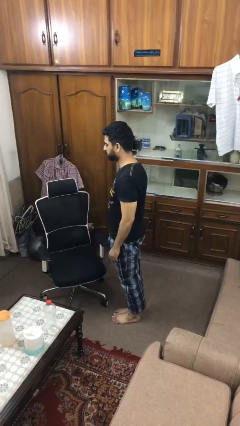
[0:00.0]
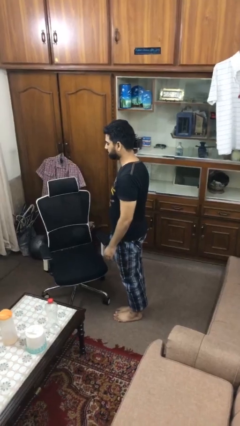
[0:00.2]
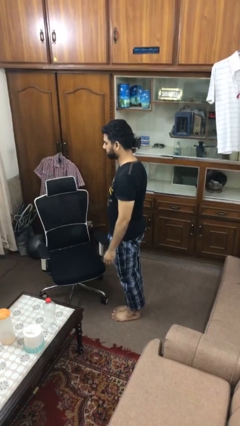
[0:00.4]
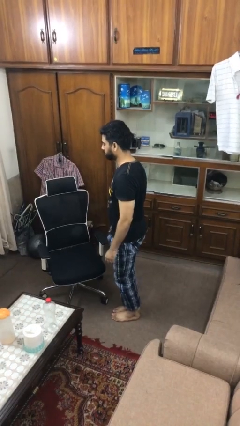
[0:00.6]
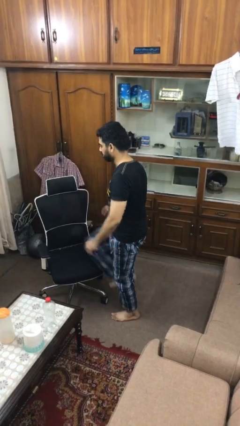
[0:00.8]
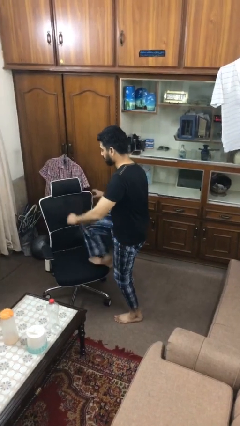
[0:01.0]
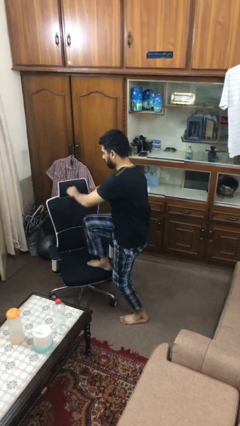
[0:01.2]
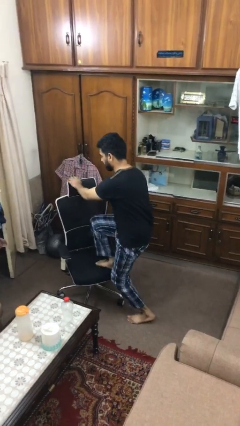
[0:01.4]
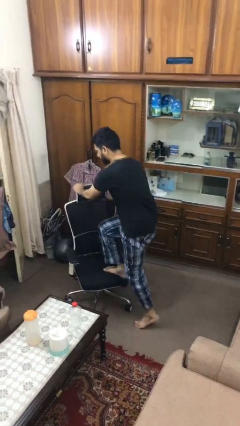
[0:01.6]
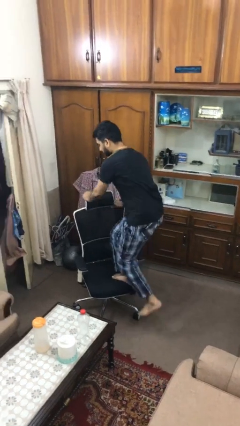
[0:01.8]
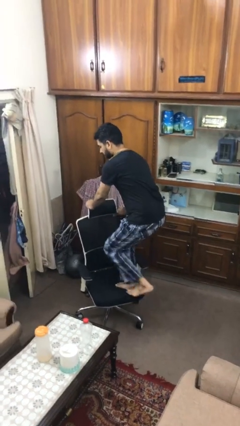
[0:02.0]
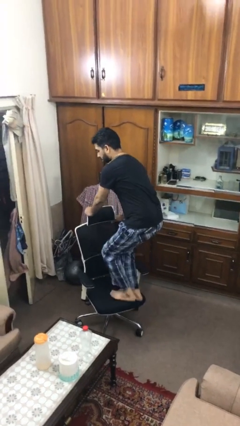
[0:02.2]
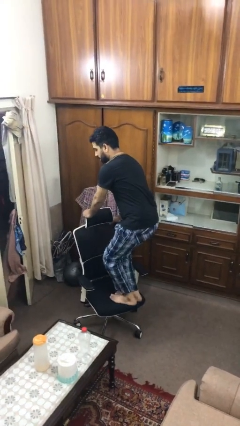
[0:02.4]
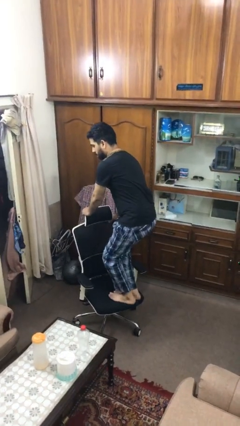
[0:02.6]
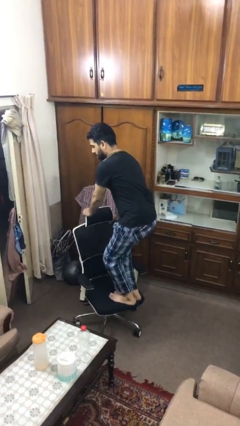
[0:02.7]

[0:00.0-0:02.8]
person climbs on chair

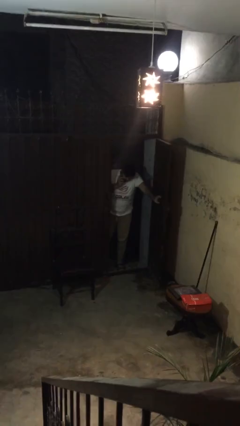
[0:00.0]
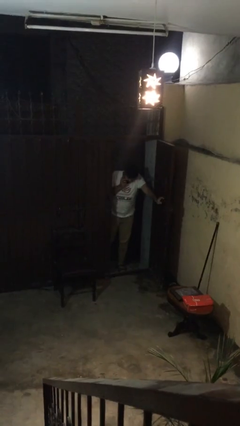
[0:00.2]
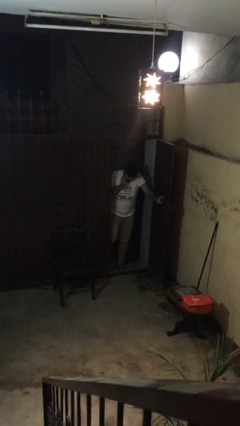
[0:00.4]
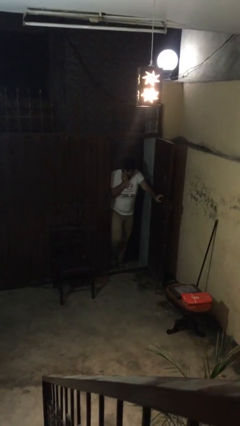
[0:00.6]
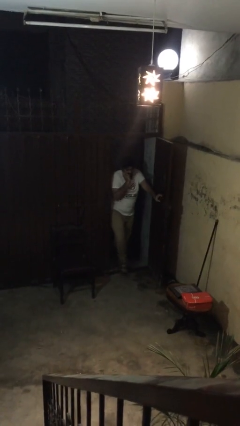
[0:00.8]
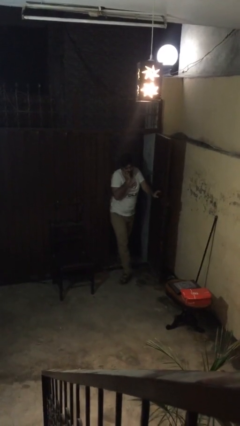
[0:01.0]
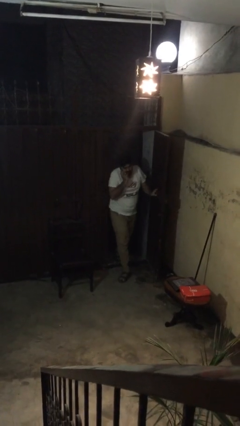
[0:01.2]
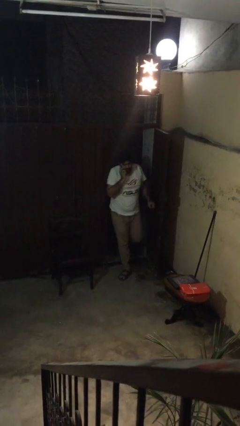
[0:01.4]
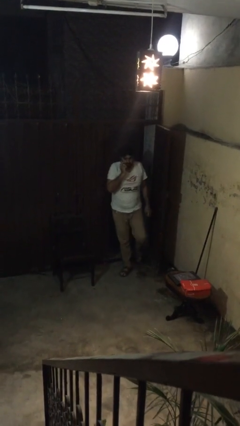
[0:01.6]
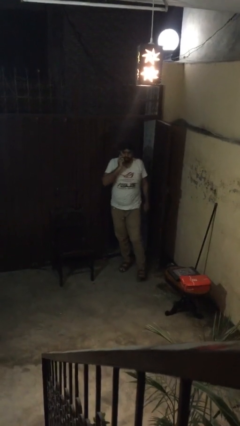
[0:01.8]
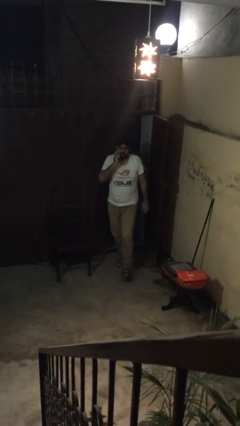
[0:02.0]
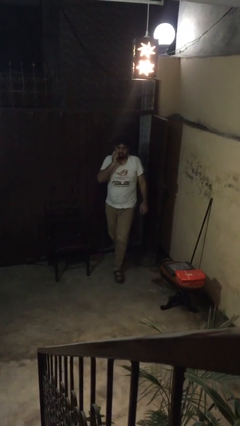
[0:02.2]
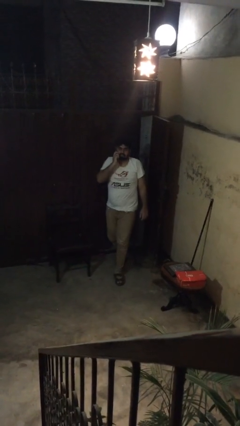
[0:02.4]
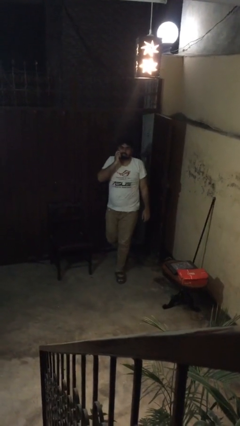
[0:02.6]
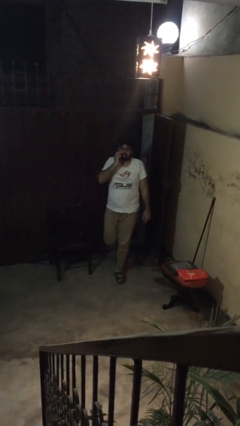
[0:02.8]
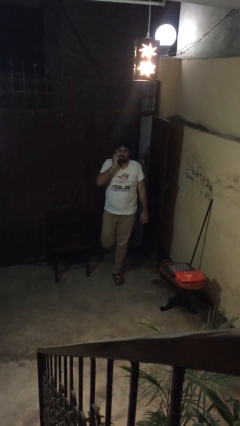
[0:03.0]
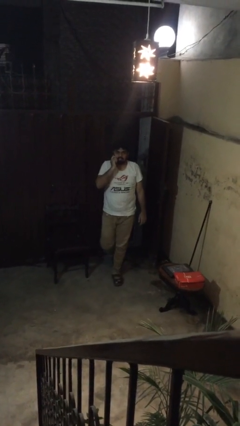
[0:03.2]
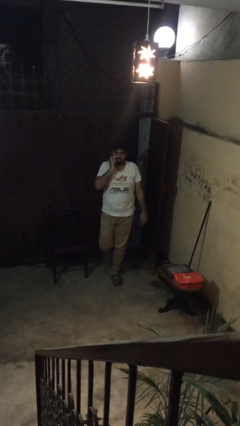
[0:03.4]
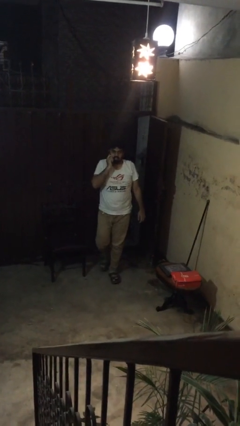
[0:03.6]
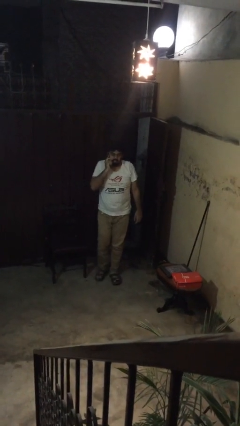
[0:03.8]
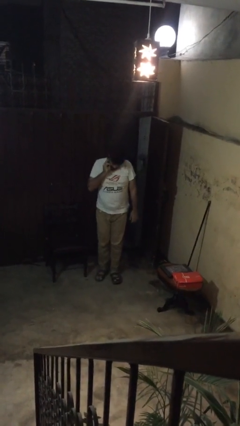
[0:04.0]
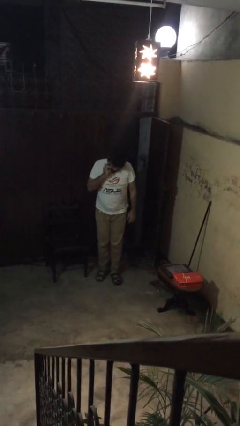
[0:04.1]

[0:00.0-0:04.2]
person enters scene through structure

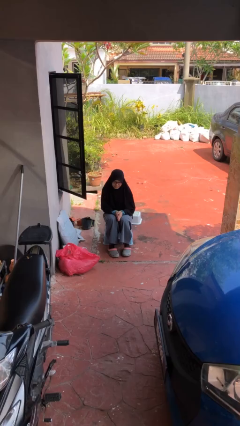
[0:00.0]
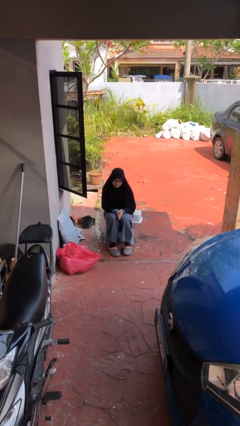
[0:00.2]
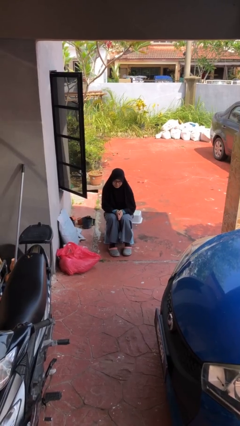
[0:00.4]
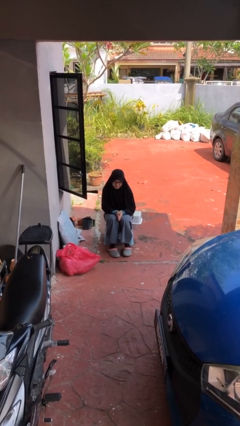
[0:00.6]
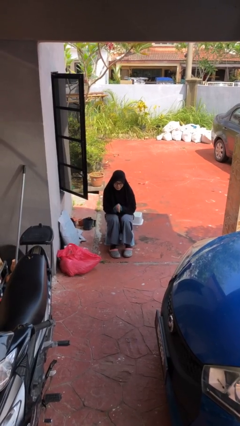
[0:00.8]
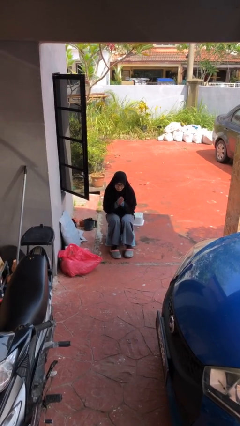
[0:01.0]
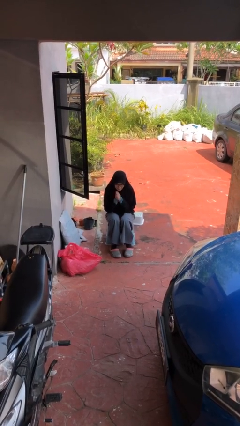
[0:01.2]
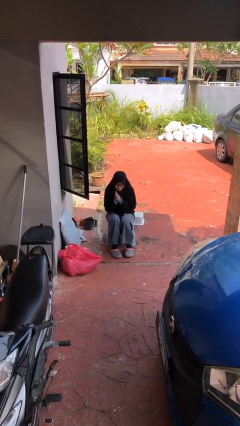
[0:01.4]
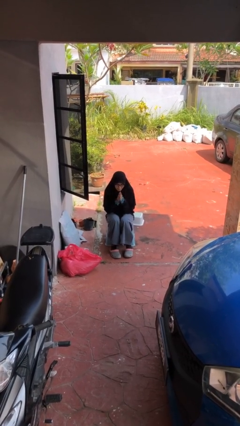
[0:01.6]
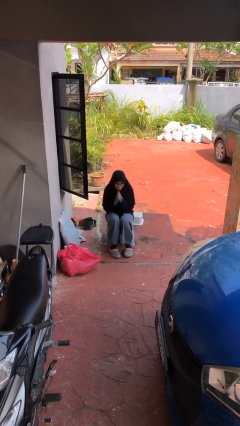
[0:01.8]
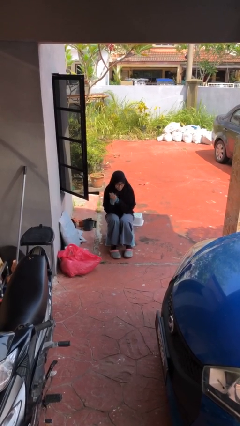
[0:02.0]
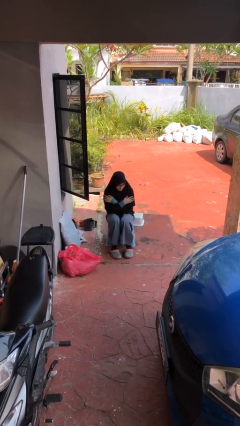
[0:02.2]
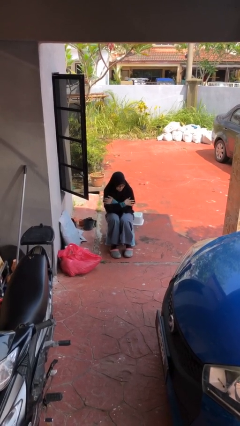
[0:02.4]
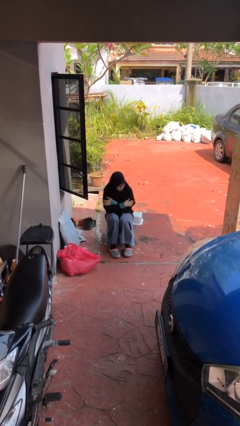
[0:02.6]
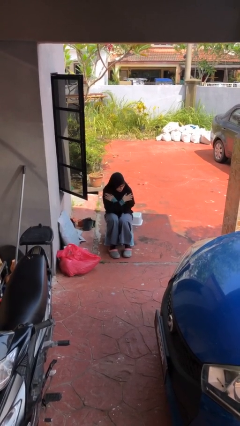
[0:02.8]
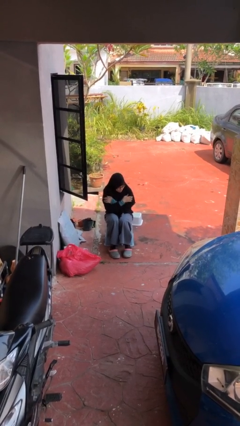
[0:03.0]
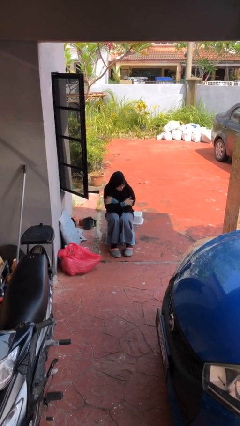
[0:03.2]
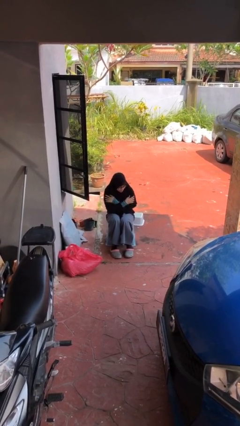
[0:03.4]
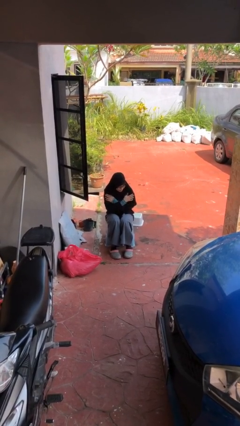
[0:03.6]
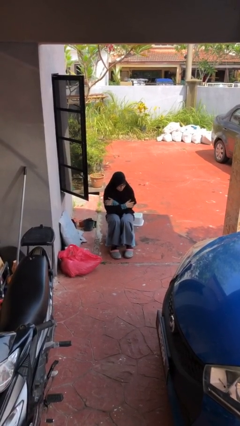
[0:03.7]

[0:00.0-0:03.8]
person blows into hands

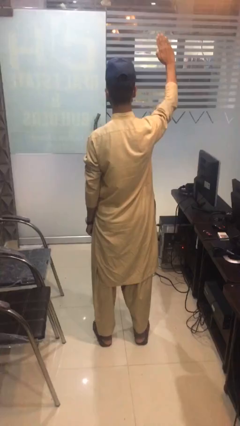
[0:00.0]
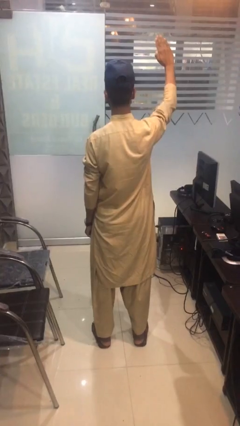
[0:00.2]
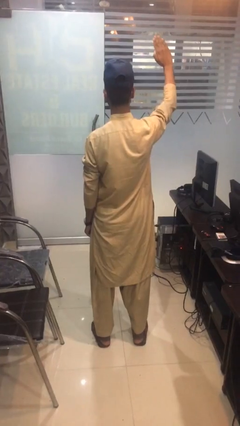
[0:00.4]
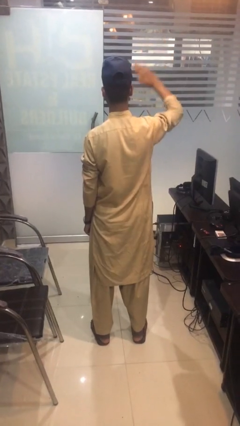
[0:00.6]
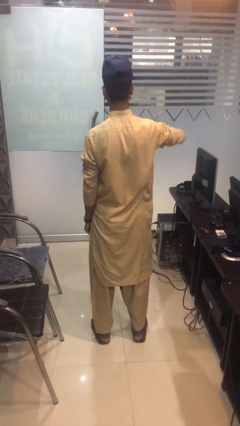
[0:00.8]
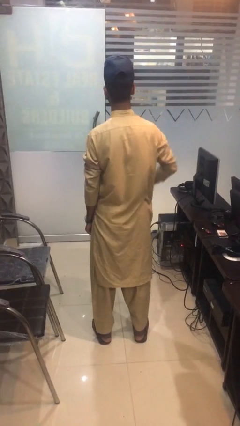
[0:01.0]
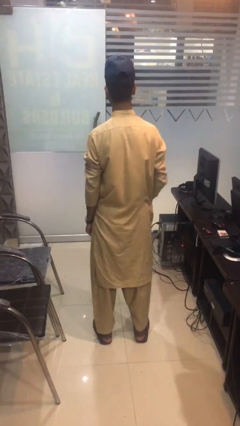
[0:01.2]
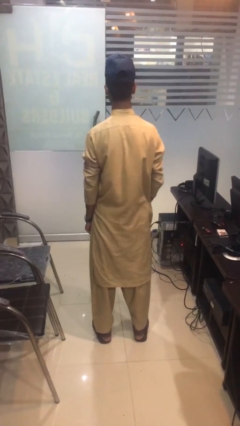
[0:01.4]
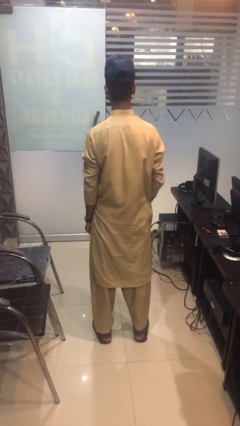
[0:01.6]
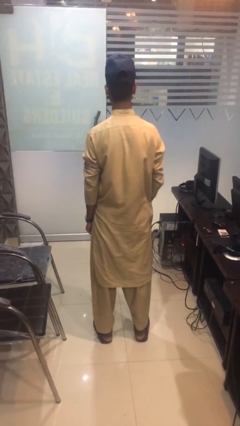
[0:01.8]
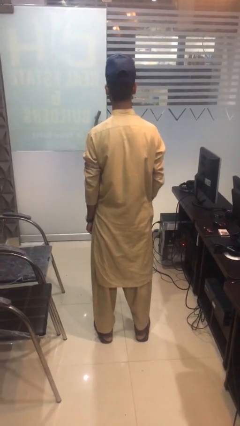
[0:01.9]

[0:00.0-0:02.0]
person gestures swipe down

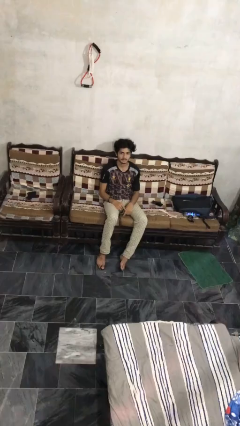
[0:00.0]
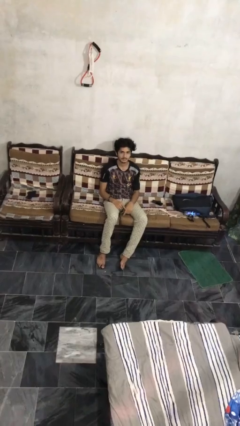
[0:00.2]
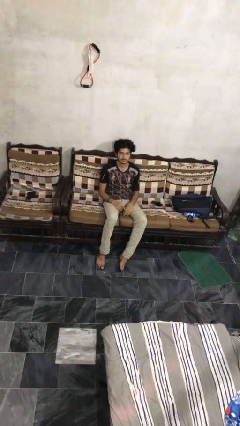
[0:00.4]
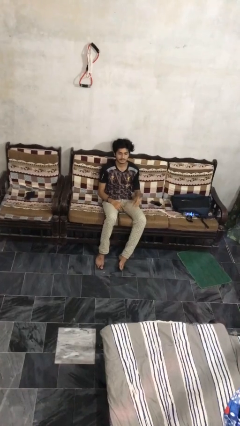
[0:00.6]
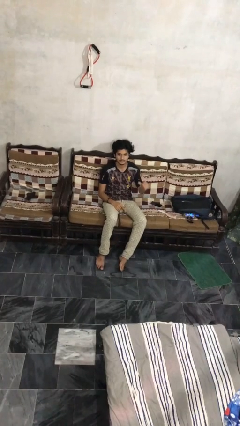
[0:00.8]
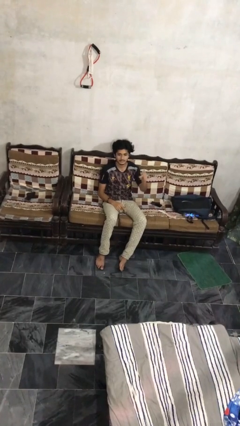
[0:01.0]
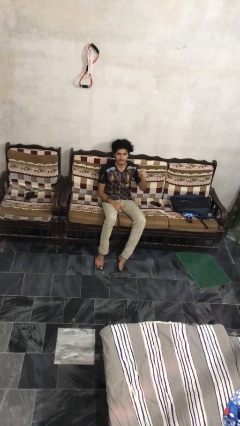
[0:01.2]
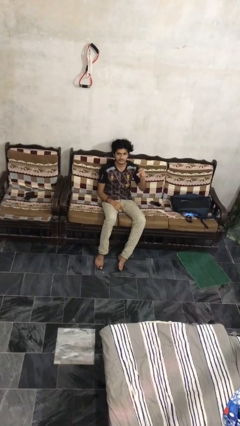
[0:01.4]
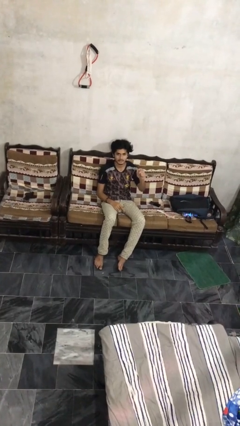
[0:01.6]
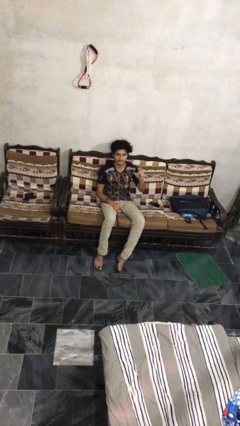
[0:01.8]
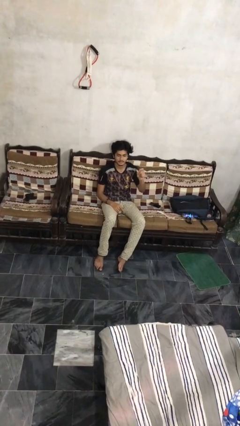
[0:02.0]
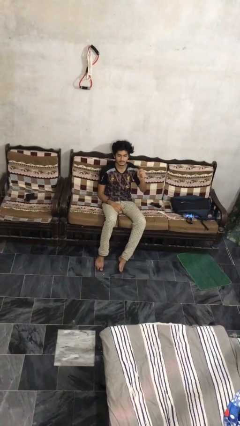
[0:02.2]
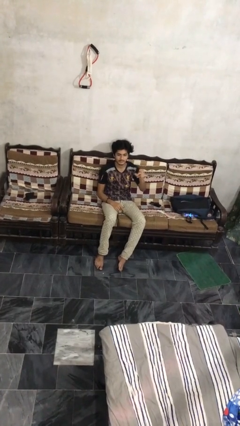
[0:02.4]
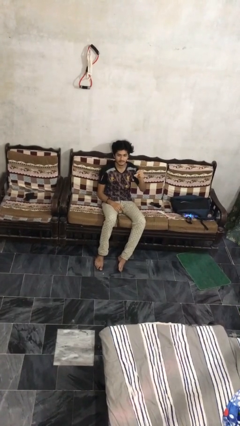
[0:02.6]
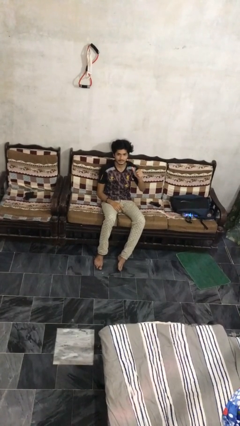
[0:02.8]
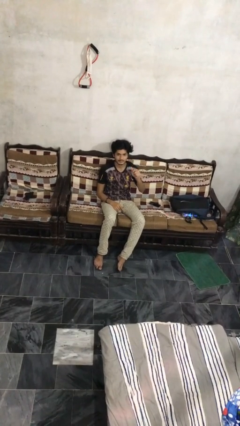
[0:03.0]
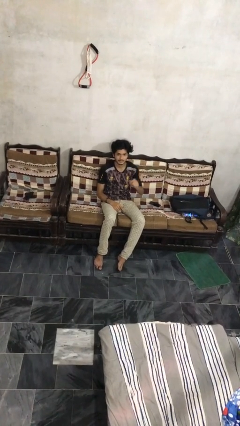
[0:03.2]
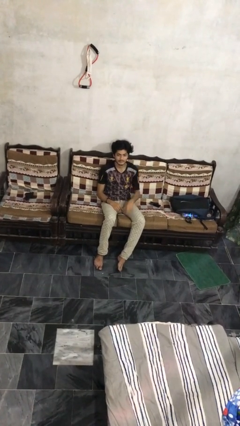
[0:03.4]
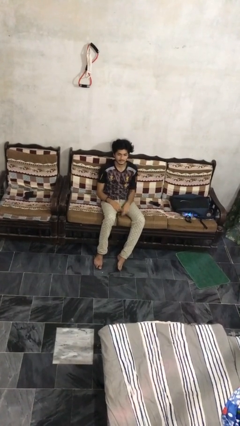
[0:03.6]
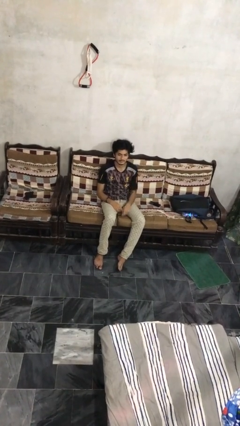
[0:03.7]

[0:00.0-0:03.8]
person snaps fingers

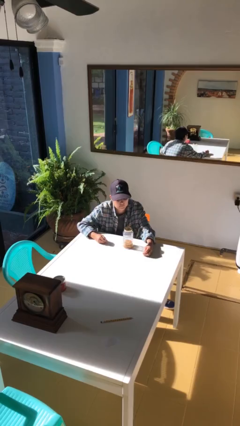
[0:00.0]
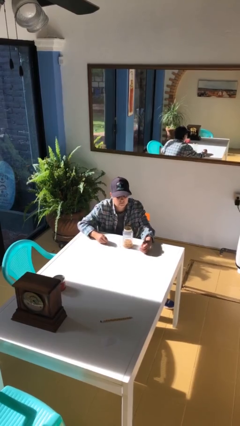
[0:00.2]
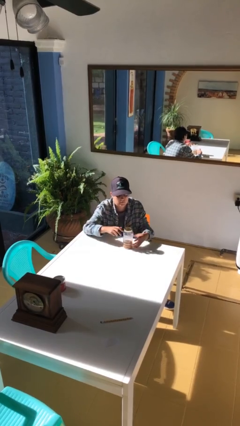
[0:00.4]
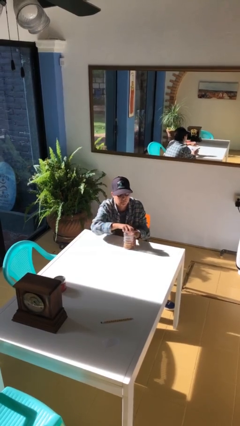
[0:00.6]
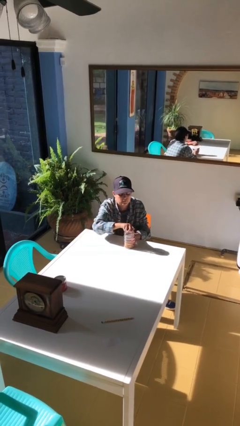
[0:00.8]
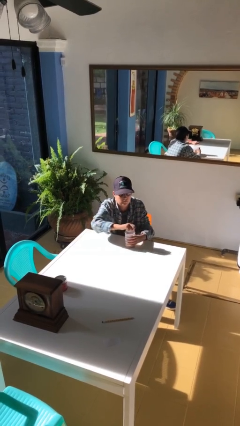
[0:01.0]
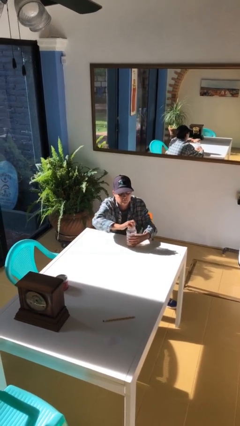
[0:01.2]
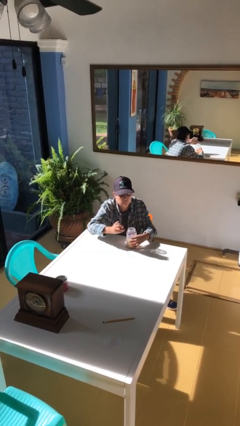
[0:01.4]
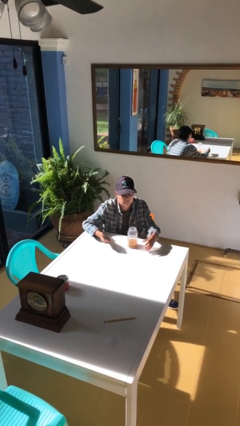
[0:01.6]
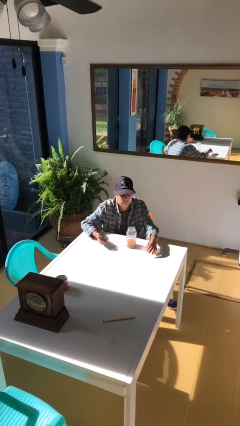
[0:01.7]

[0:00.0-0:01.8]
person opens jar
